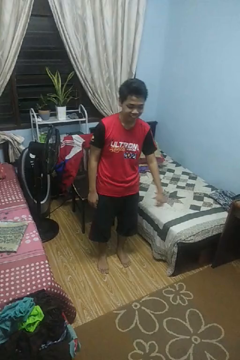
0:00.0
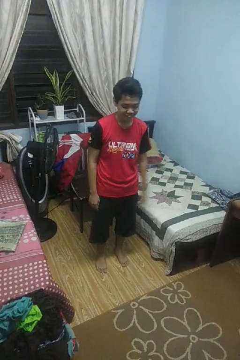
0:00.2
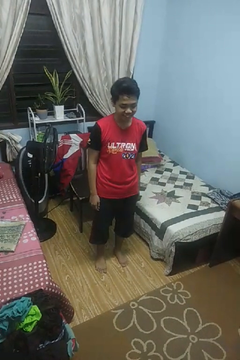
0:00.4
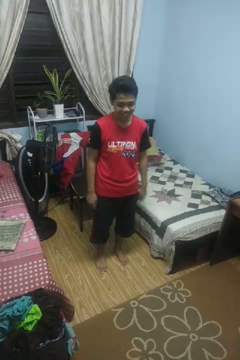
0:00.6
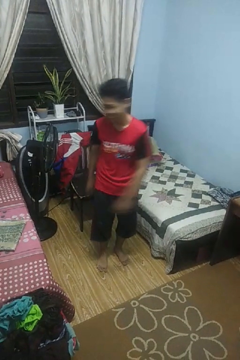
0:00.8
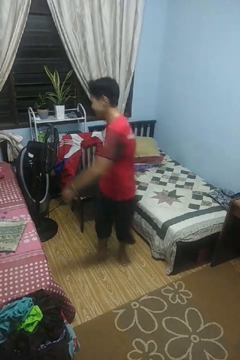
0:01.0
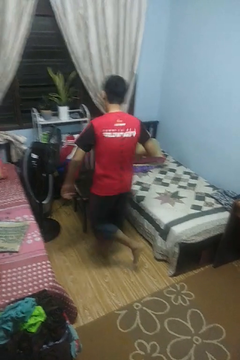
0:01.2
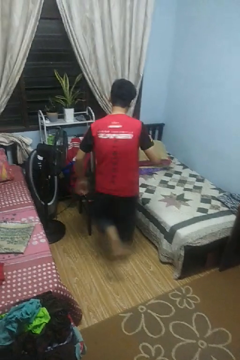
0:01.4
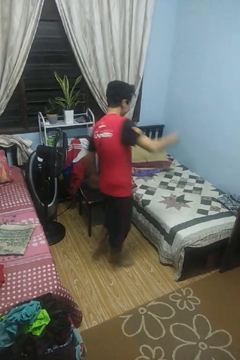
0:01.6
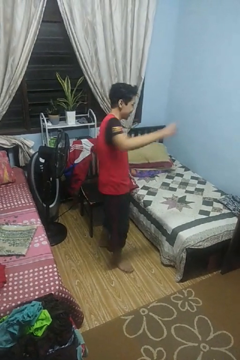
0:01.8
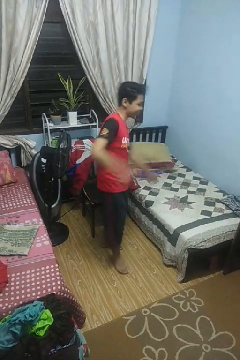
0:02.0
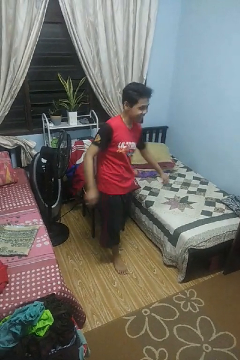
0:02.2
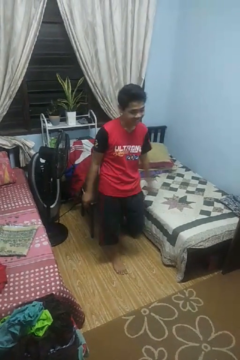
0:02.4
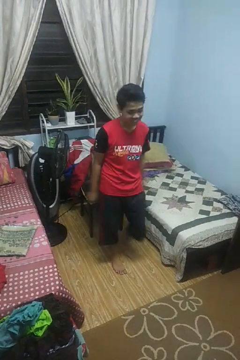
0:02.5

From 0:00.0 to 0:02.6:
person twirls

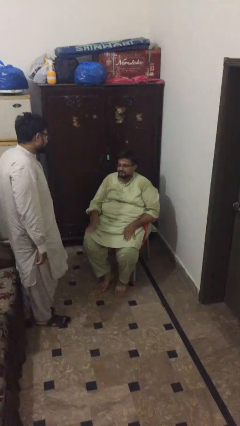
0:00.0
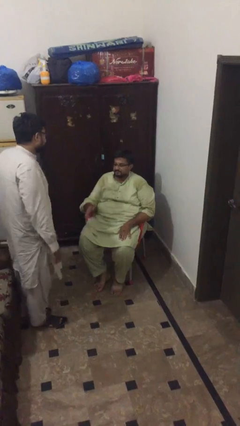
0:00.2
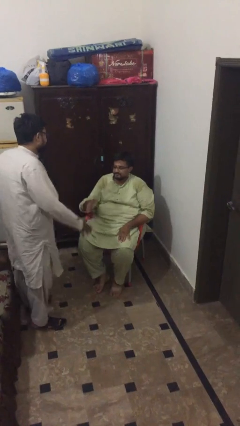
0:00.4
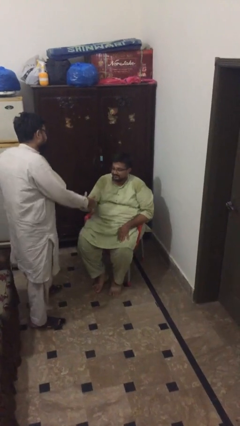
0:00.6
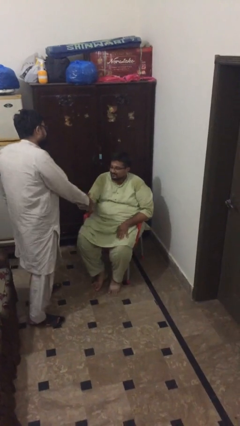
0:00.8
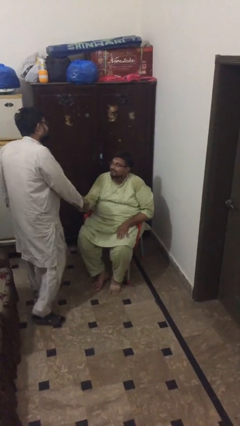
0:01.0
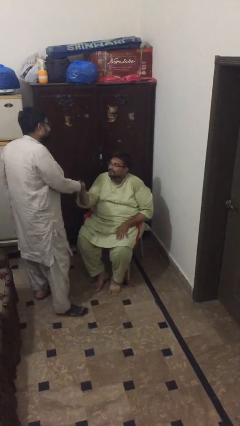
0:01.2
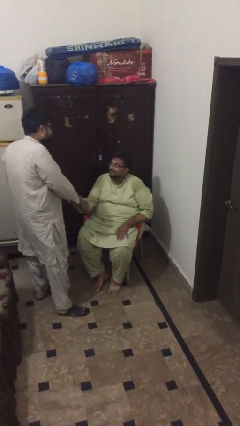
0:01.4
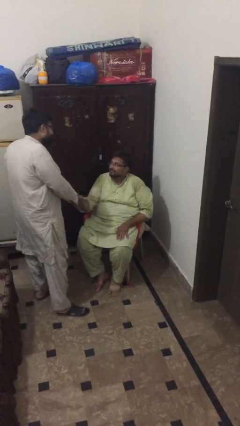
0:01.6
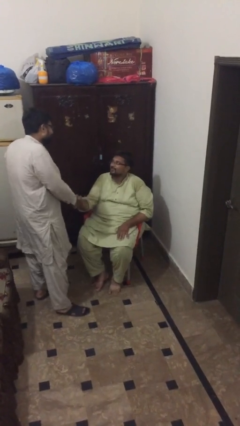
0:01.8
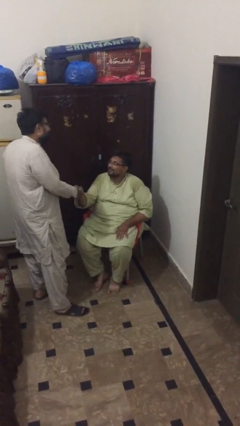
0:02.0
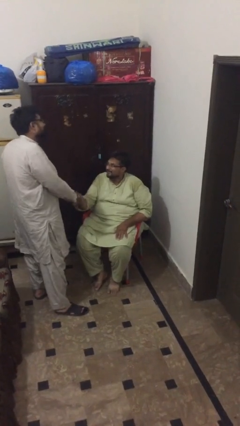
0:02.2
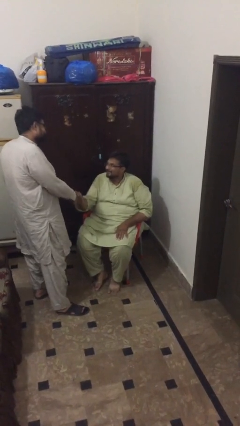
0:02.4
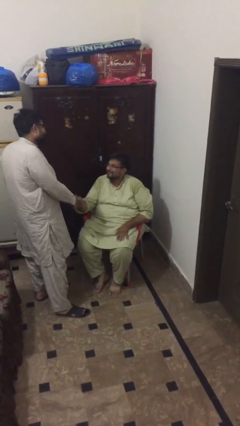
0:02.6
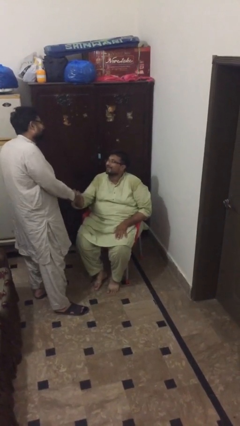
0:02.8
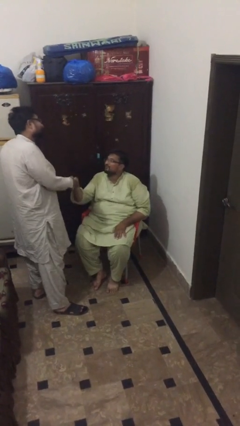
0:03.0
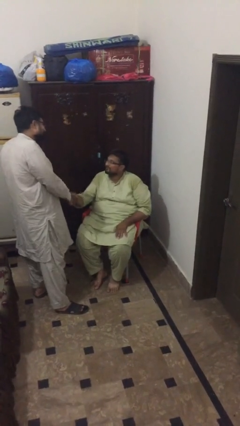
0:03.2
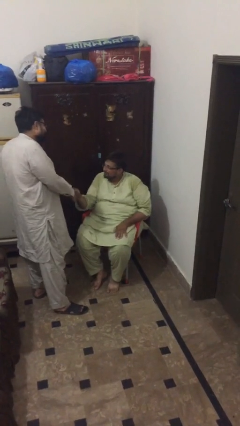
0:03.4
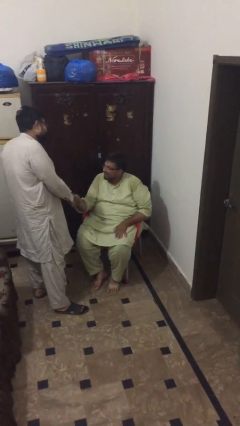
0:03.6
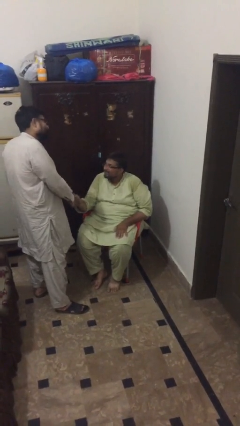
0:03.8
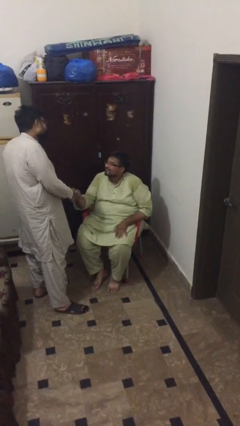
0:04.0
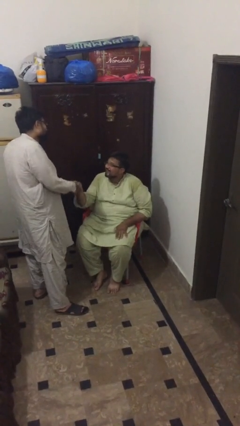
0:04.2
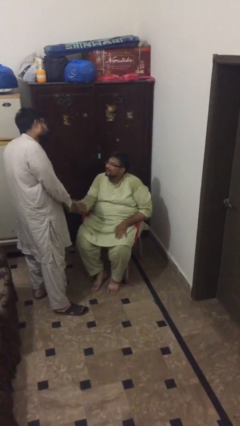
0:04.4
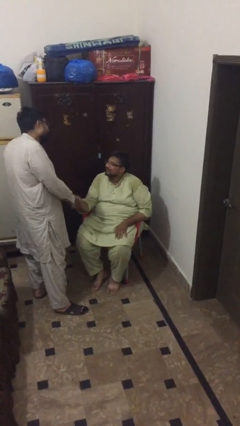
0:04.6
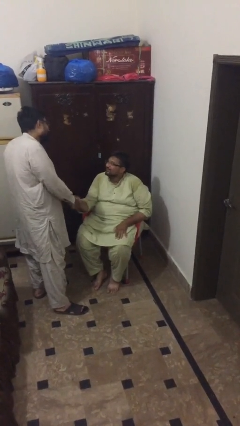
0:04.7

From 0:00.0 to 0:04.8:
person shakes hand

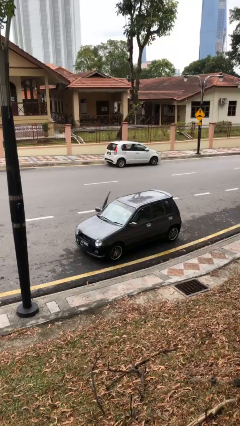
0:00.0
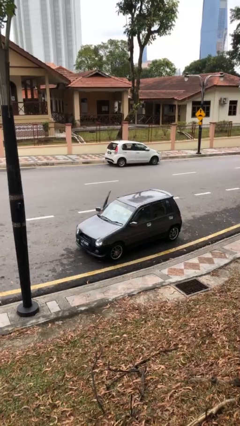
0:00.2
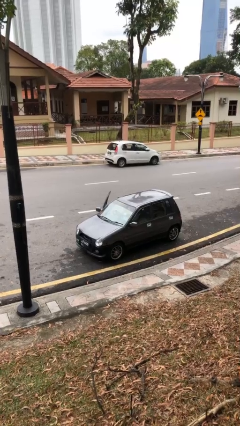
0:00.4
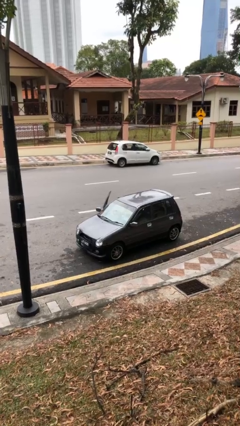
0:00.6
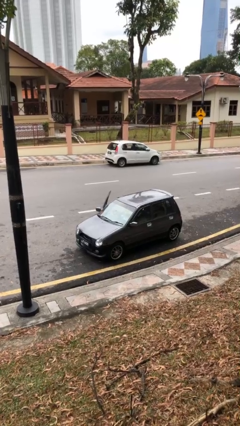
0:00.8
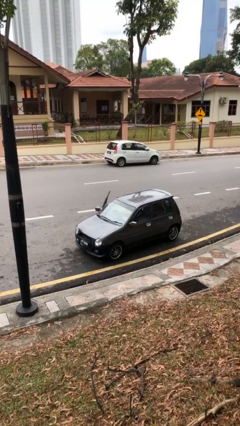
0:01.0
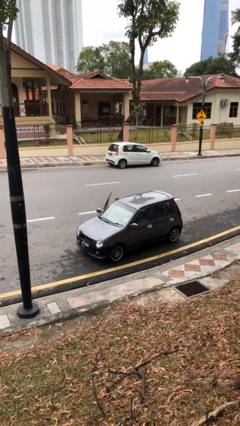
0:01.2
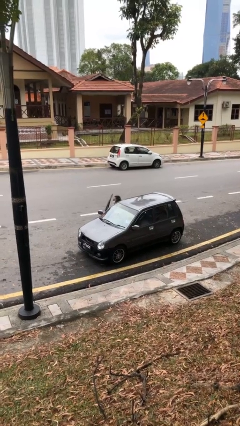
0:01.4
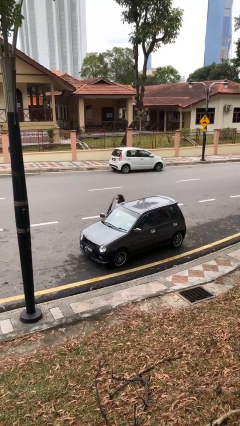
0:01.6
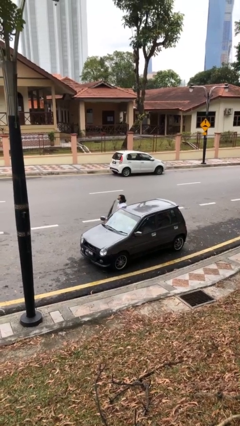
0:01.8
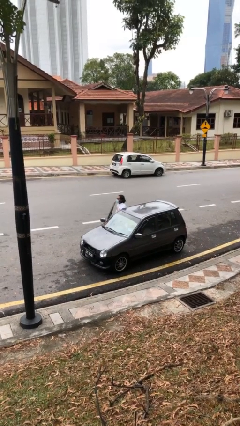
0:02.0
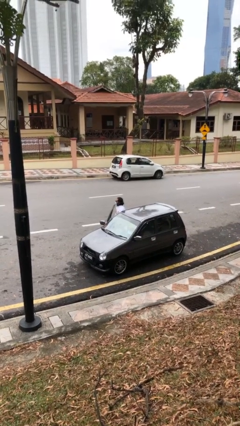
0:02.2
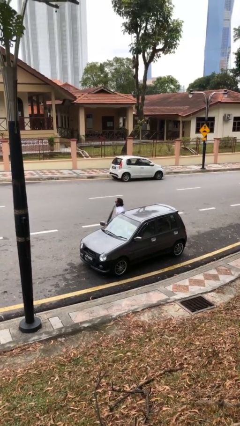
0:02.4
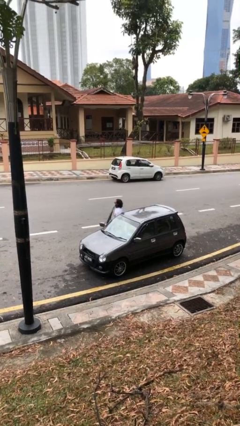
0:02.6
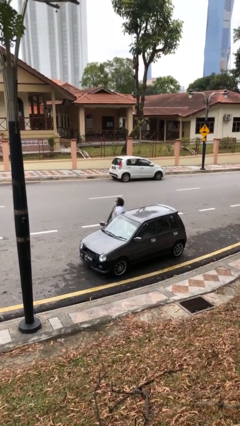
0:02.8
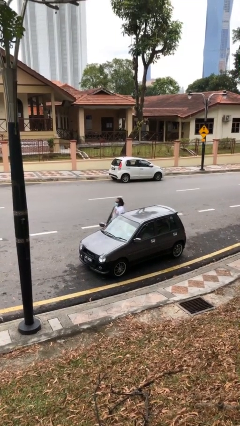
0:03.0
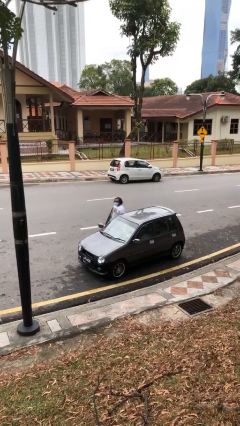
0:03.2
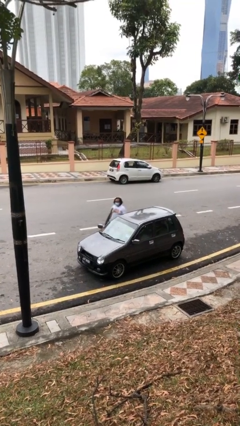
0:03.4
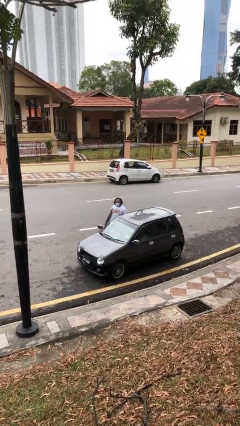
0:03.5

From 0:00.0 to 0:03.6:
person exits car

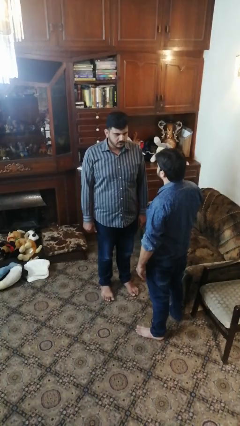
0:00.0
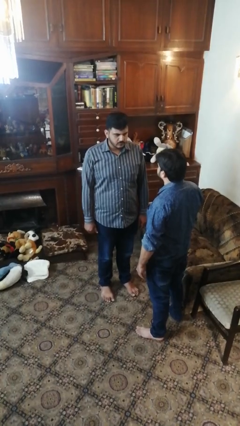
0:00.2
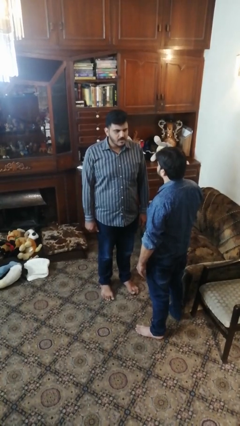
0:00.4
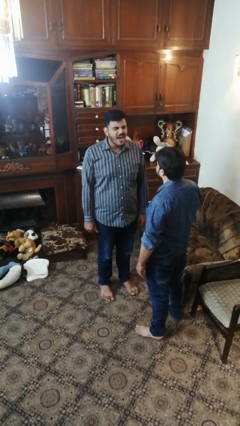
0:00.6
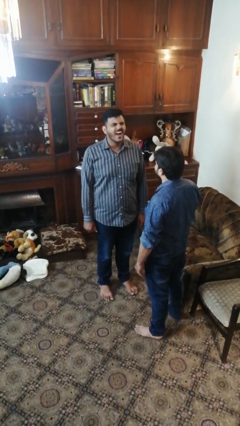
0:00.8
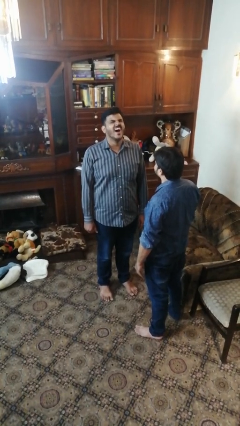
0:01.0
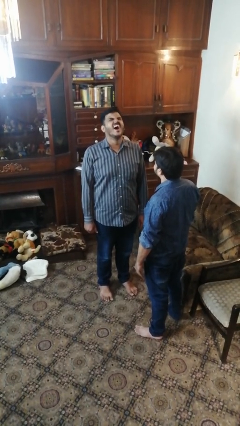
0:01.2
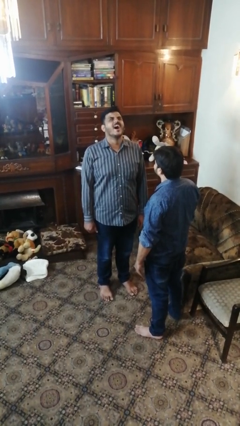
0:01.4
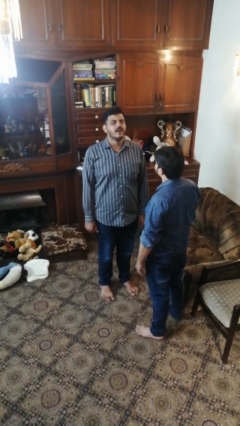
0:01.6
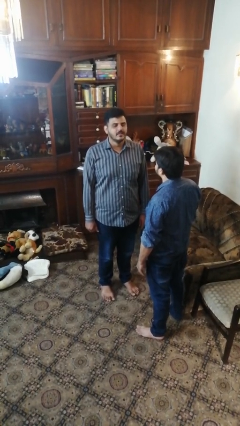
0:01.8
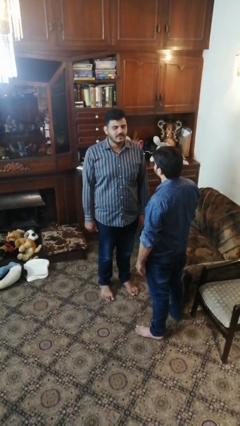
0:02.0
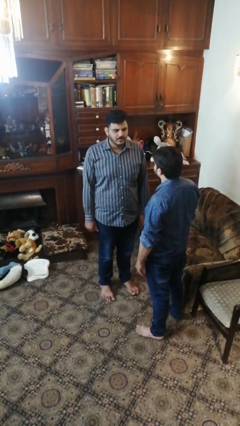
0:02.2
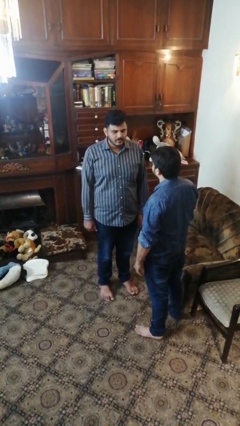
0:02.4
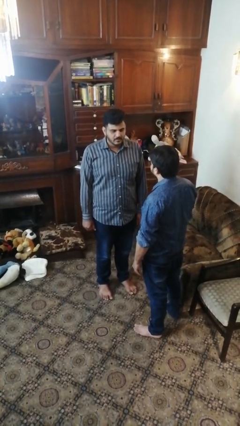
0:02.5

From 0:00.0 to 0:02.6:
person laughs with person

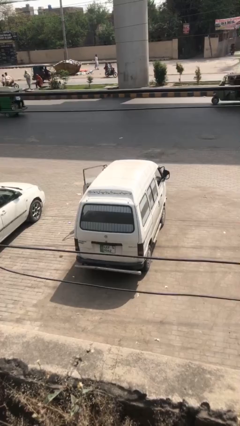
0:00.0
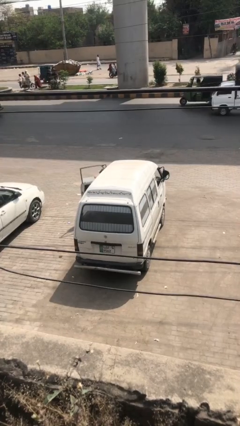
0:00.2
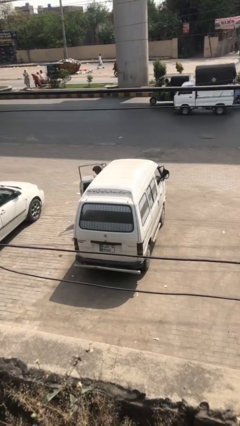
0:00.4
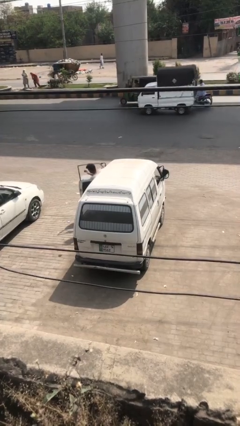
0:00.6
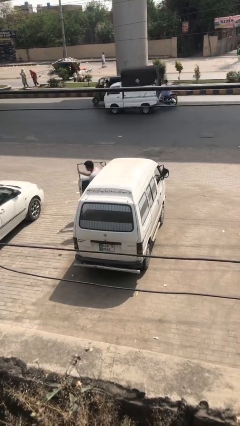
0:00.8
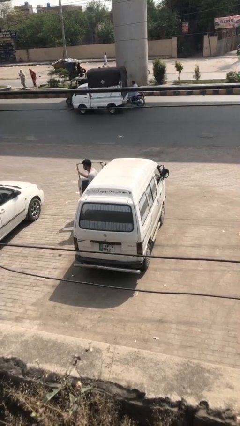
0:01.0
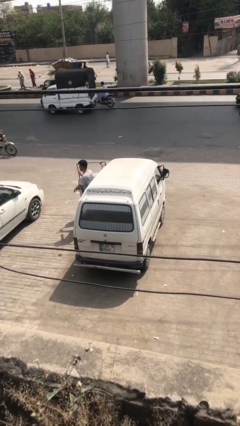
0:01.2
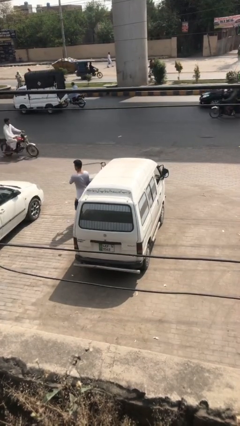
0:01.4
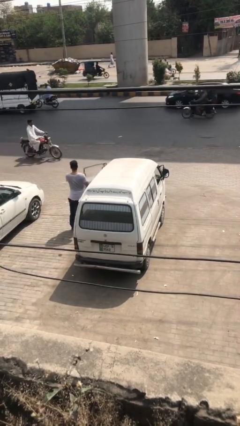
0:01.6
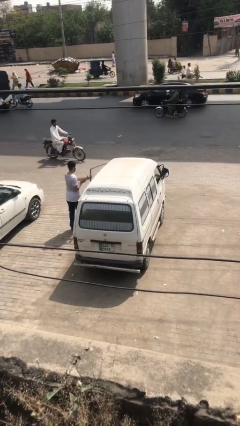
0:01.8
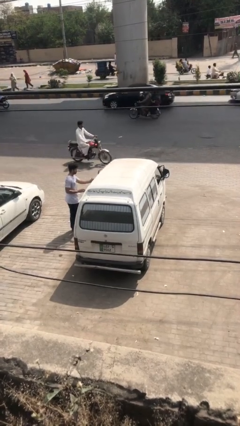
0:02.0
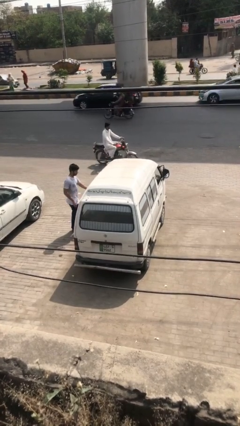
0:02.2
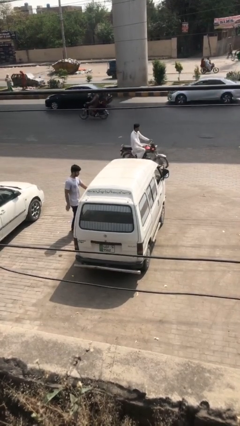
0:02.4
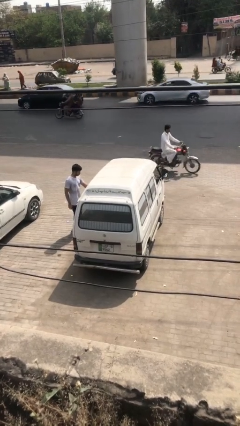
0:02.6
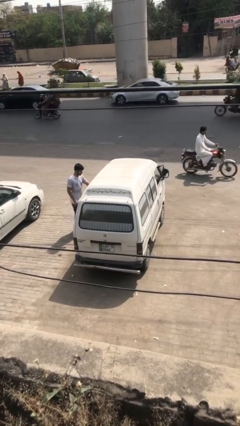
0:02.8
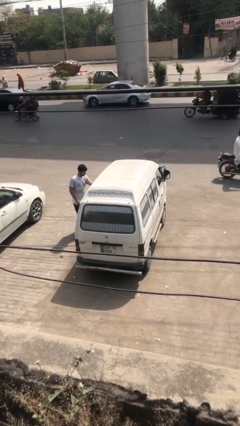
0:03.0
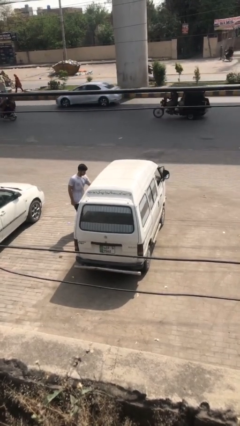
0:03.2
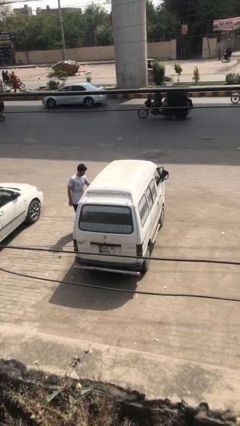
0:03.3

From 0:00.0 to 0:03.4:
car drops off person
